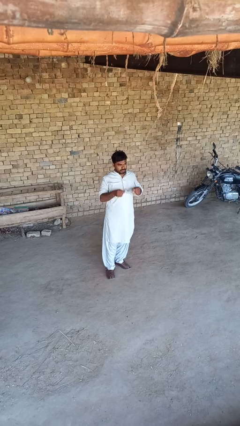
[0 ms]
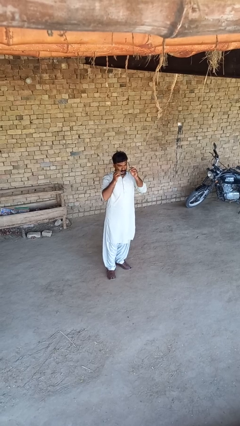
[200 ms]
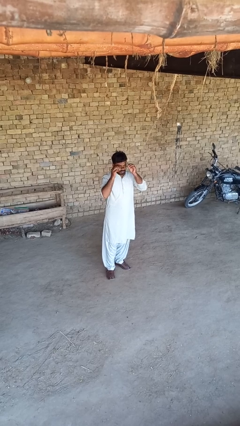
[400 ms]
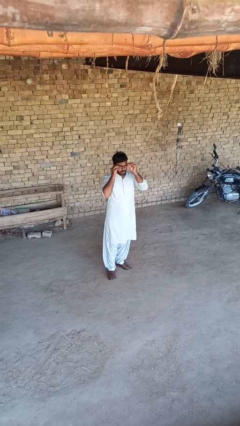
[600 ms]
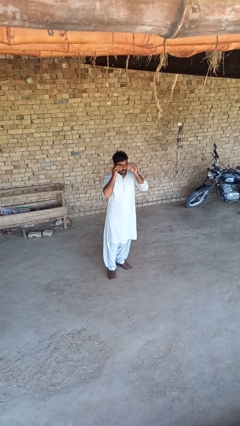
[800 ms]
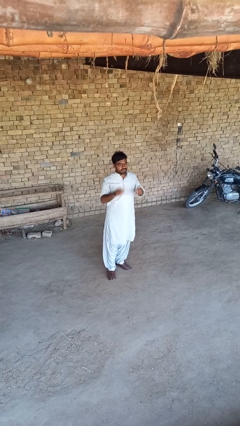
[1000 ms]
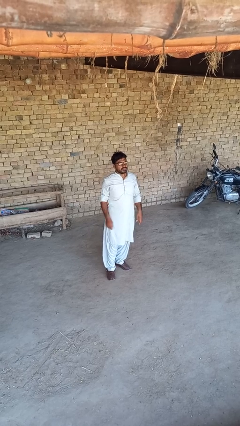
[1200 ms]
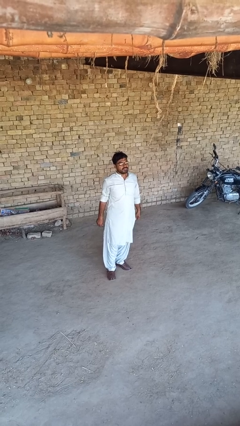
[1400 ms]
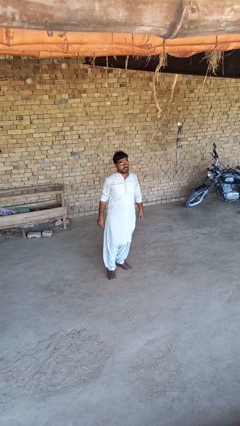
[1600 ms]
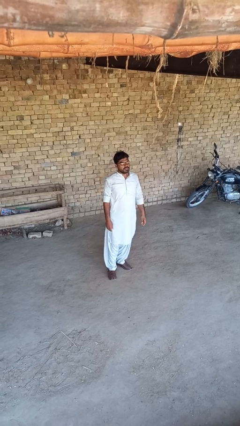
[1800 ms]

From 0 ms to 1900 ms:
person puts on glasses

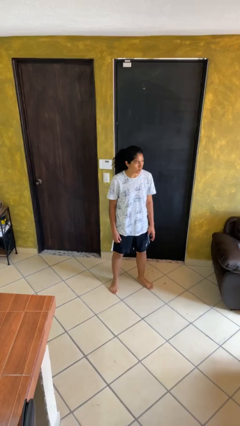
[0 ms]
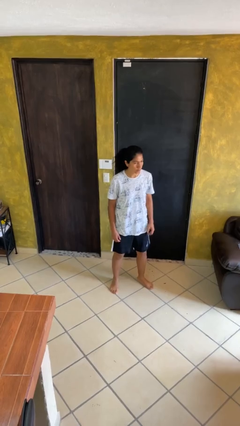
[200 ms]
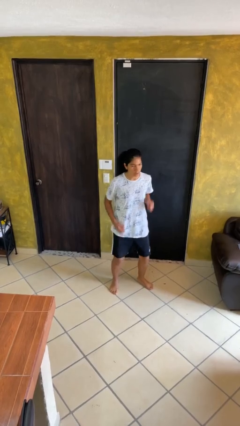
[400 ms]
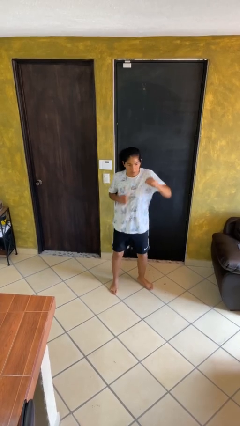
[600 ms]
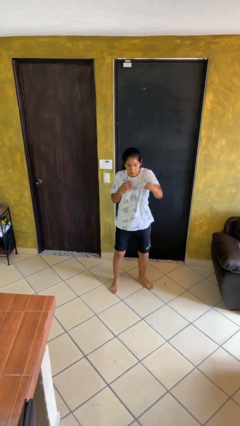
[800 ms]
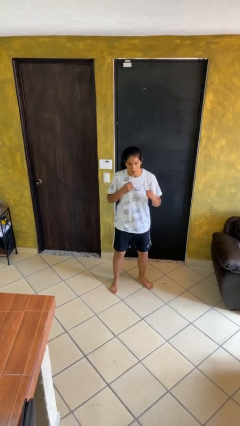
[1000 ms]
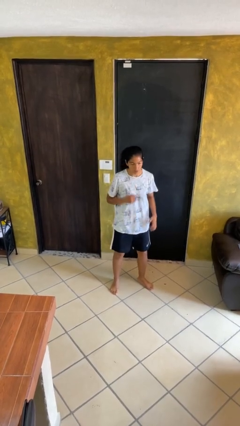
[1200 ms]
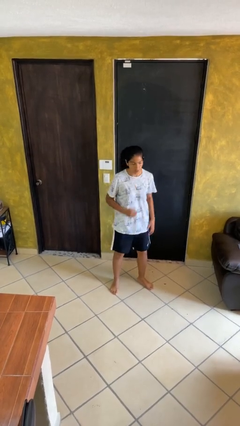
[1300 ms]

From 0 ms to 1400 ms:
person punches

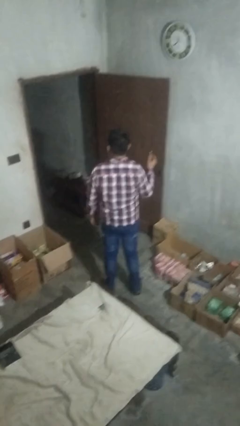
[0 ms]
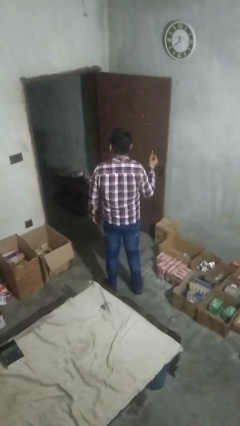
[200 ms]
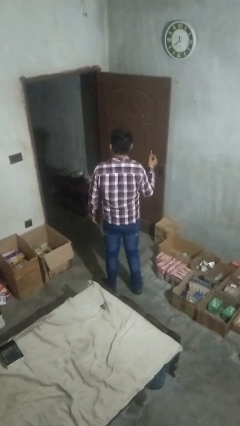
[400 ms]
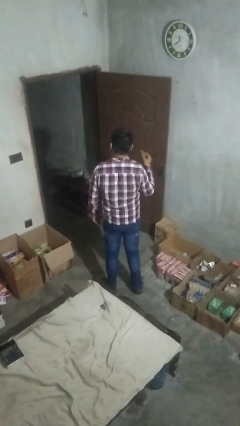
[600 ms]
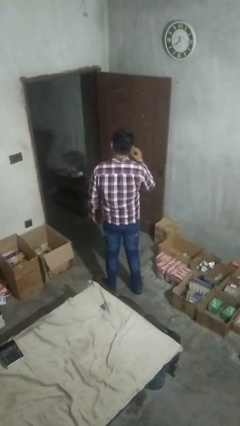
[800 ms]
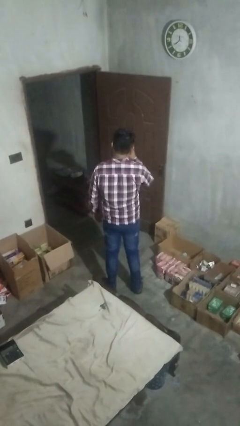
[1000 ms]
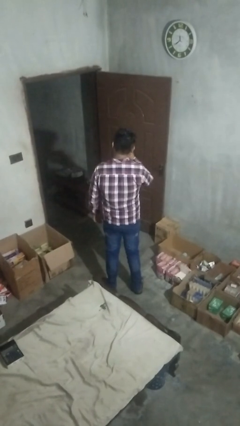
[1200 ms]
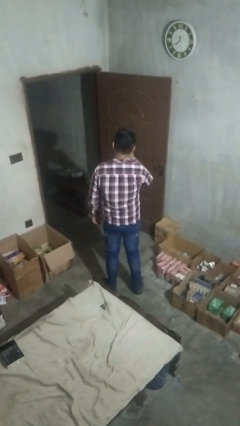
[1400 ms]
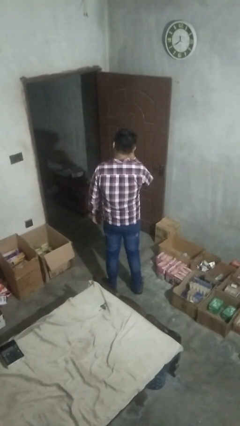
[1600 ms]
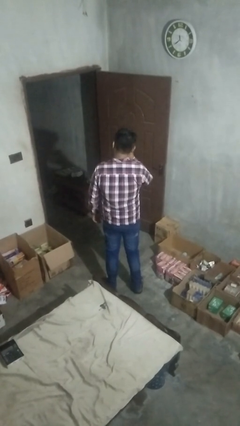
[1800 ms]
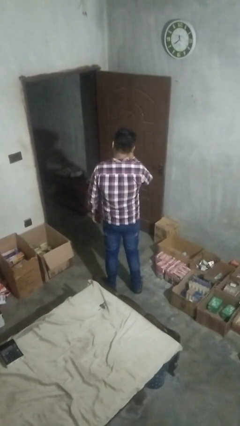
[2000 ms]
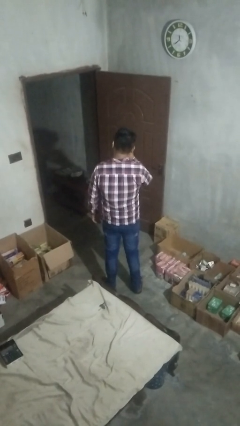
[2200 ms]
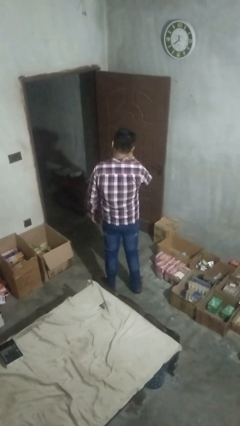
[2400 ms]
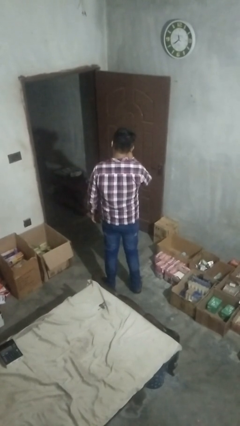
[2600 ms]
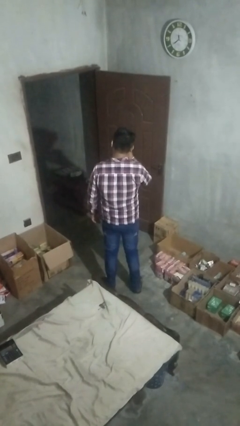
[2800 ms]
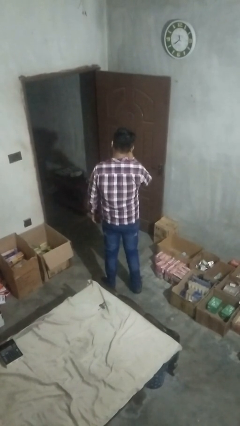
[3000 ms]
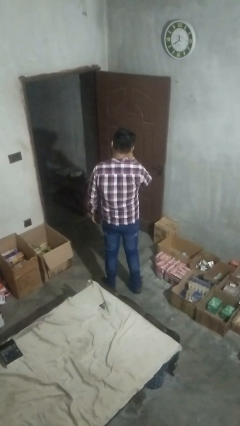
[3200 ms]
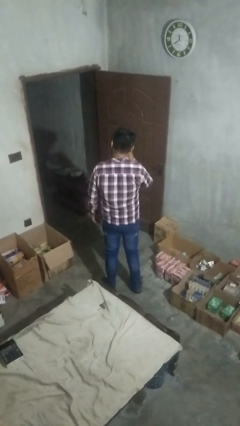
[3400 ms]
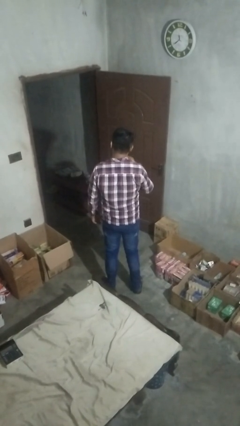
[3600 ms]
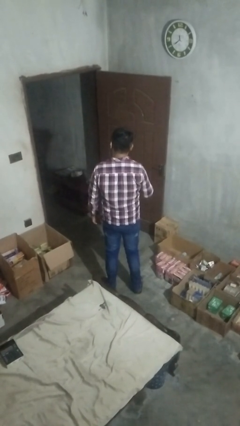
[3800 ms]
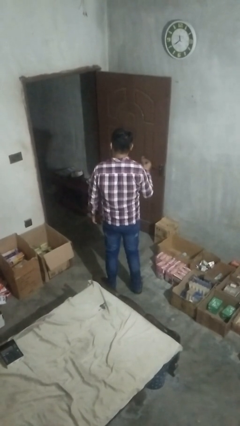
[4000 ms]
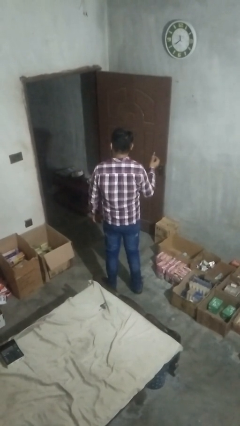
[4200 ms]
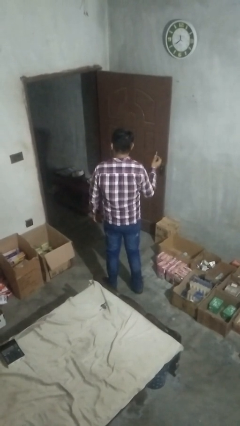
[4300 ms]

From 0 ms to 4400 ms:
person flosses

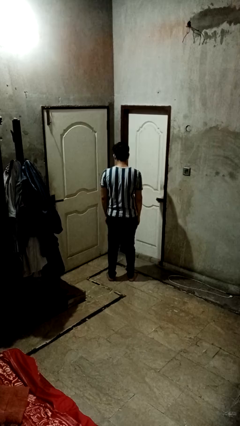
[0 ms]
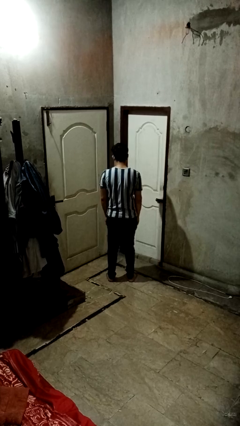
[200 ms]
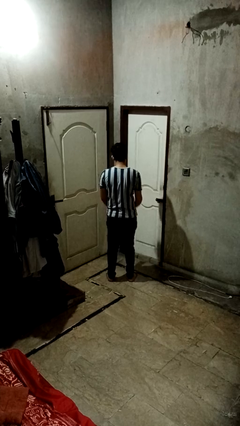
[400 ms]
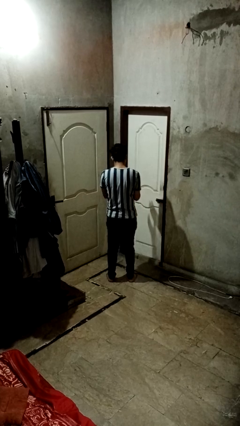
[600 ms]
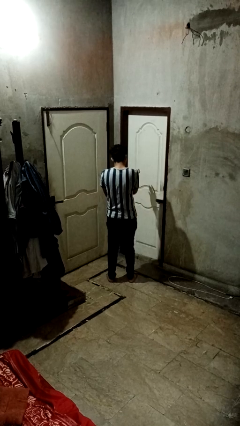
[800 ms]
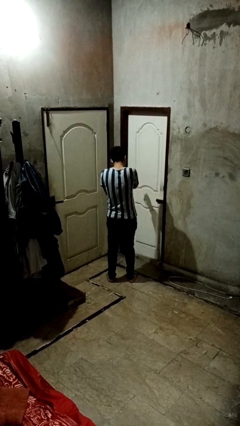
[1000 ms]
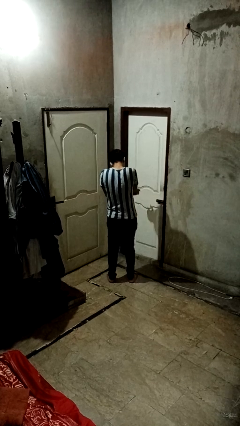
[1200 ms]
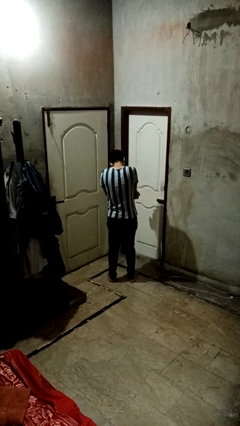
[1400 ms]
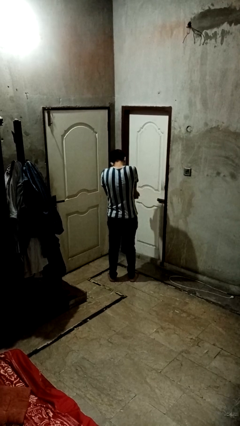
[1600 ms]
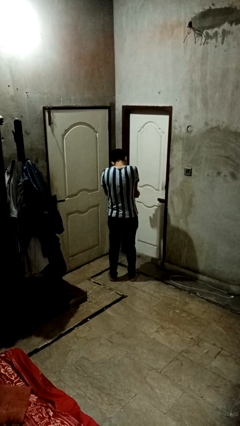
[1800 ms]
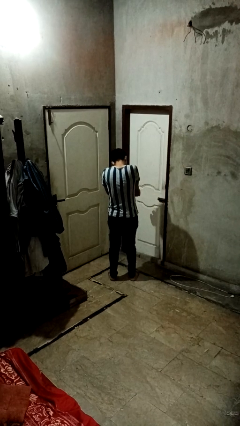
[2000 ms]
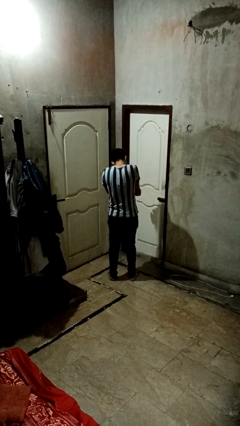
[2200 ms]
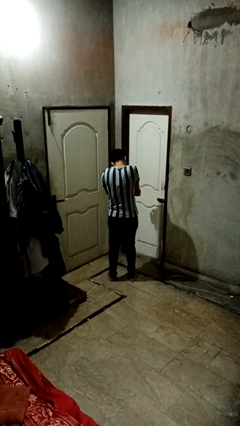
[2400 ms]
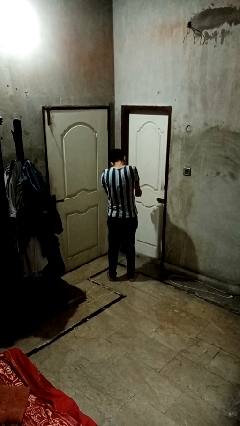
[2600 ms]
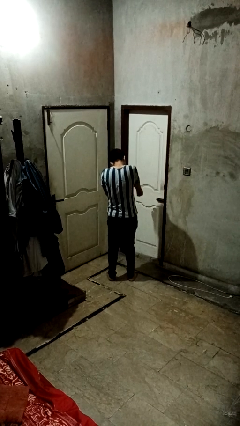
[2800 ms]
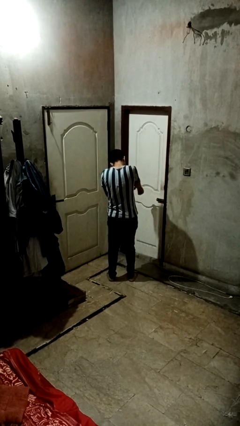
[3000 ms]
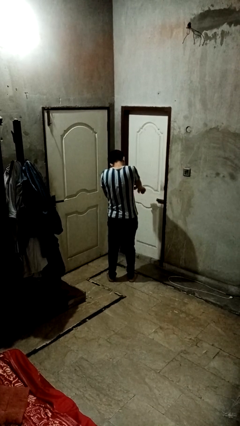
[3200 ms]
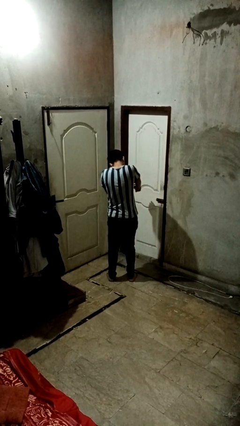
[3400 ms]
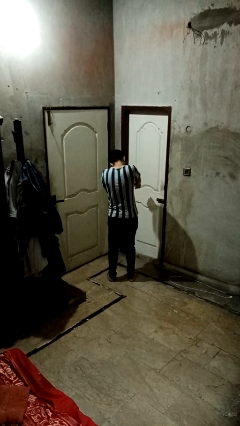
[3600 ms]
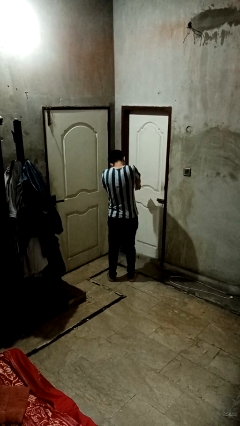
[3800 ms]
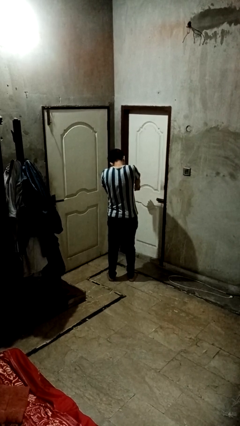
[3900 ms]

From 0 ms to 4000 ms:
person swats bug

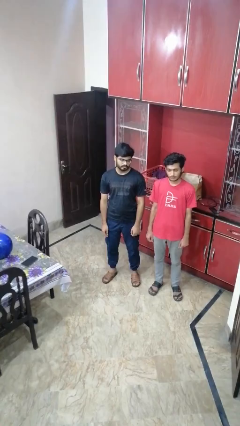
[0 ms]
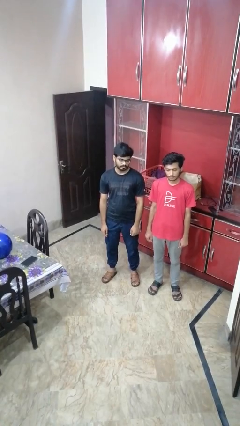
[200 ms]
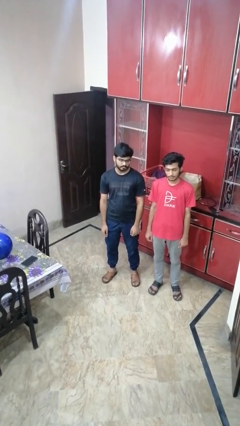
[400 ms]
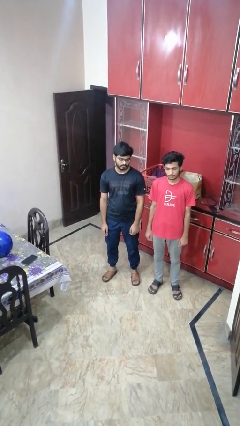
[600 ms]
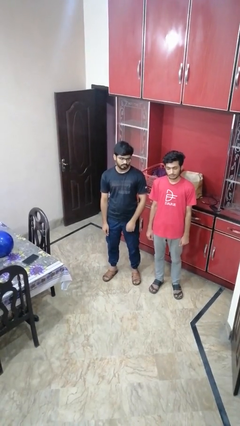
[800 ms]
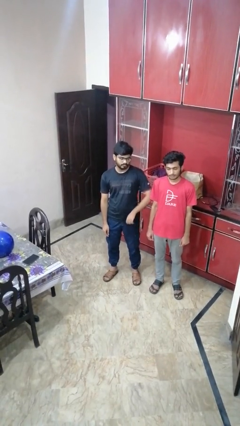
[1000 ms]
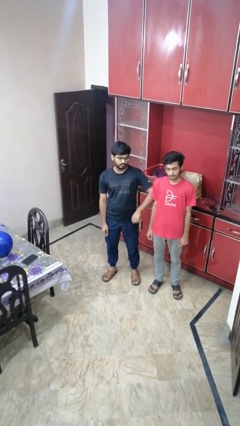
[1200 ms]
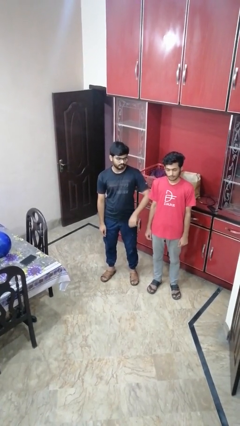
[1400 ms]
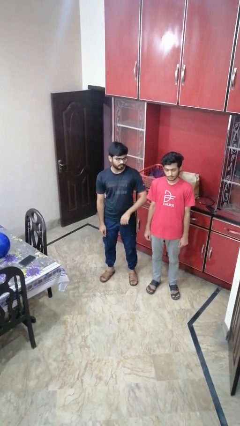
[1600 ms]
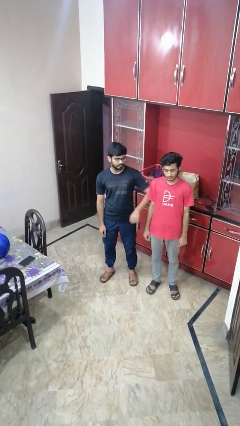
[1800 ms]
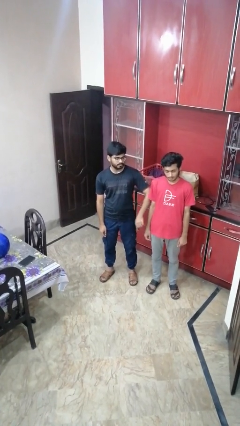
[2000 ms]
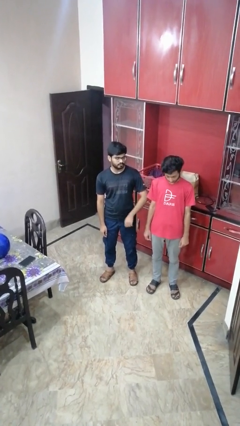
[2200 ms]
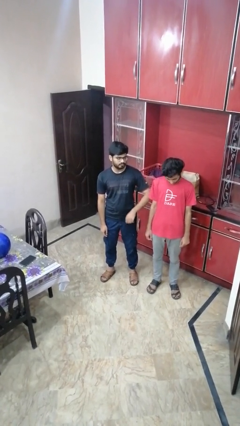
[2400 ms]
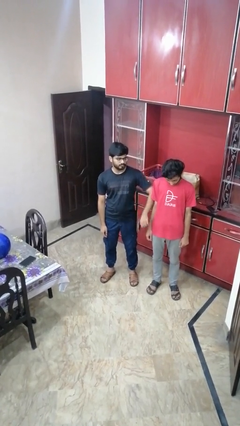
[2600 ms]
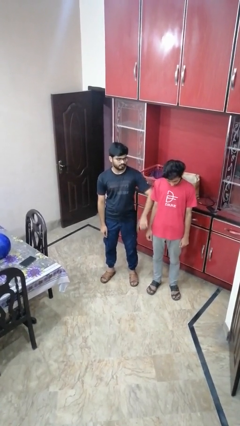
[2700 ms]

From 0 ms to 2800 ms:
person nudges person with elbow

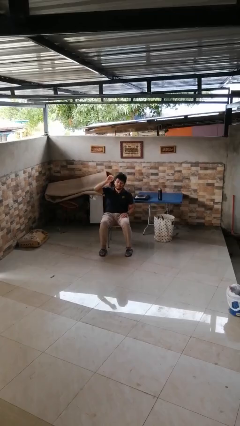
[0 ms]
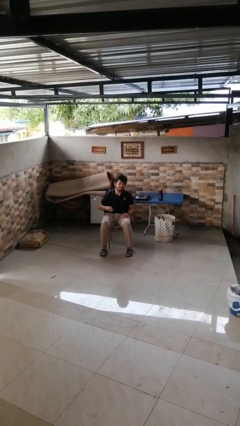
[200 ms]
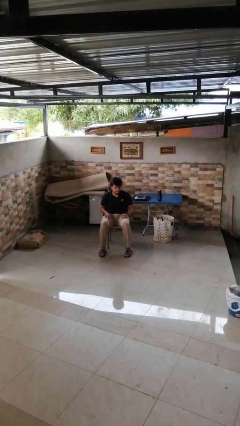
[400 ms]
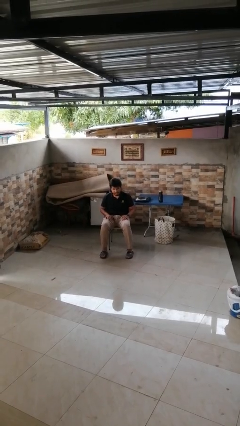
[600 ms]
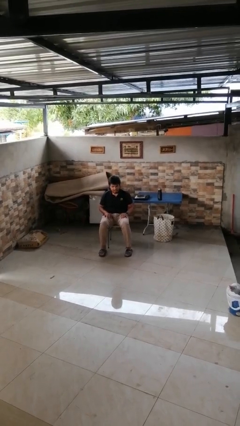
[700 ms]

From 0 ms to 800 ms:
person gestures lower hand

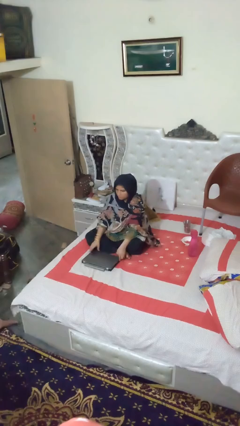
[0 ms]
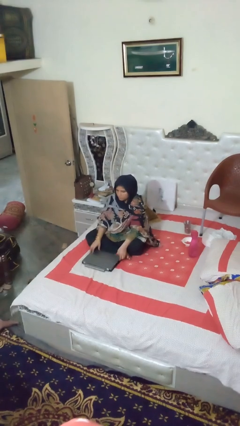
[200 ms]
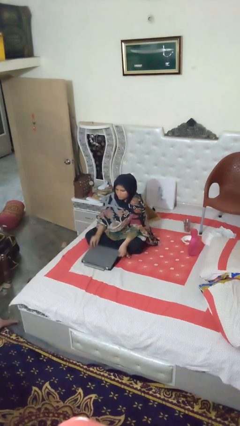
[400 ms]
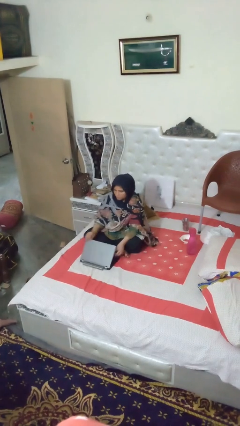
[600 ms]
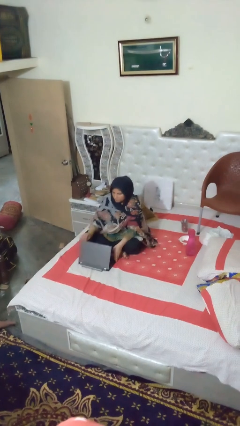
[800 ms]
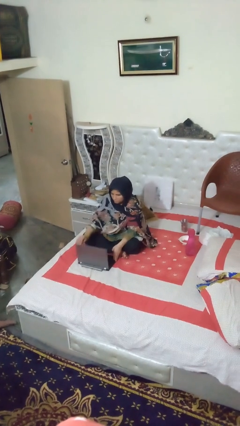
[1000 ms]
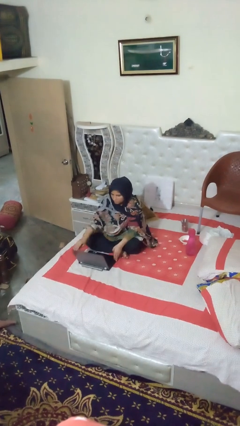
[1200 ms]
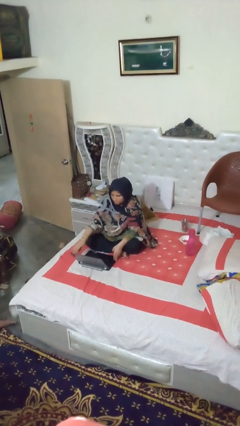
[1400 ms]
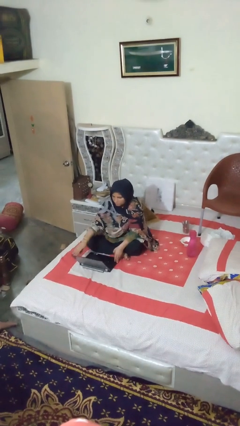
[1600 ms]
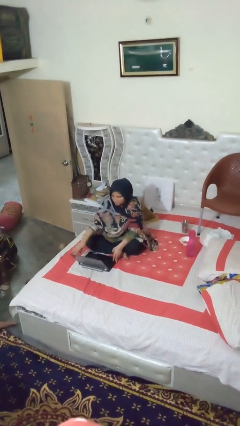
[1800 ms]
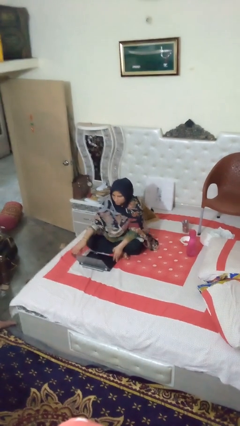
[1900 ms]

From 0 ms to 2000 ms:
person opens laptop

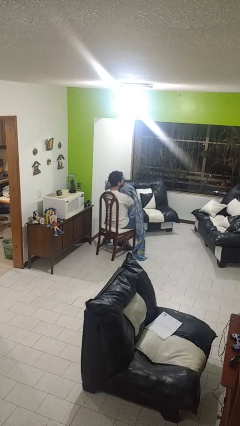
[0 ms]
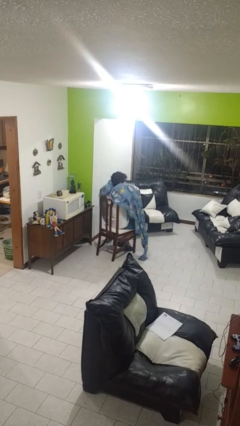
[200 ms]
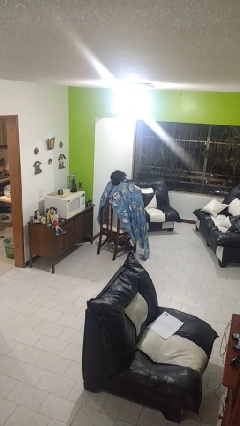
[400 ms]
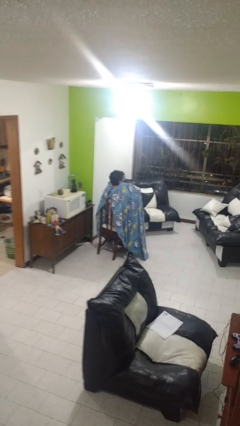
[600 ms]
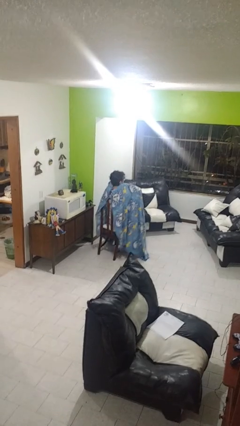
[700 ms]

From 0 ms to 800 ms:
person covers with blanket
